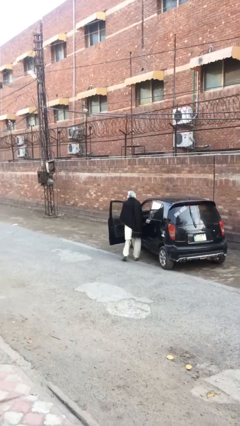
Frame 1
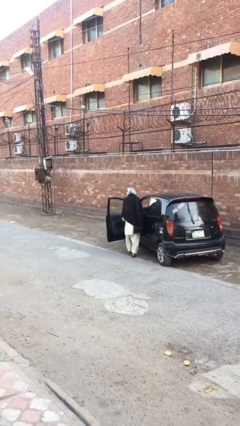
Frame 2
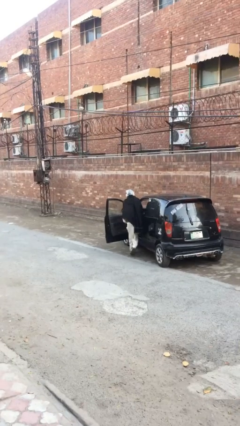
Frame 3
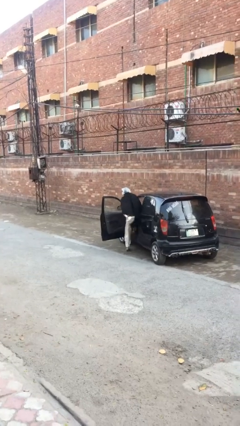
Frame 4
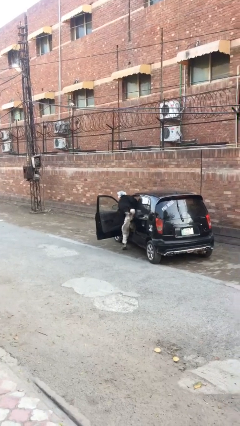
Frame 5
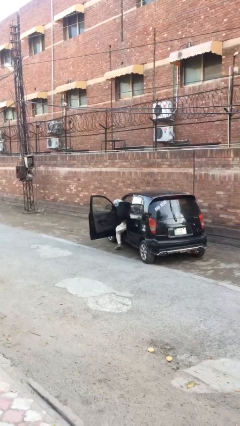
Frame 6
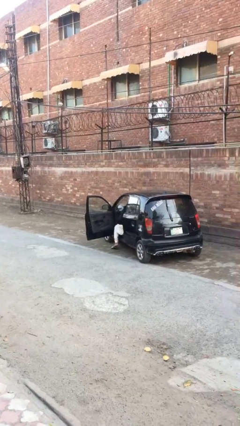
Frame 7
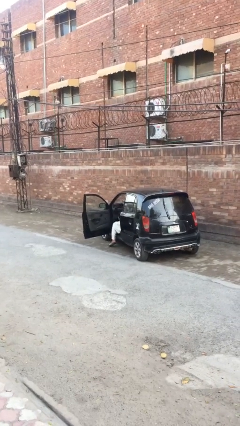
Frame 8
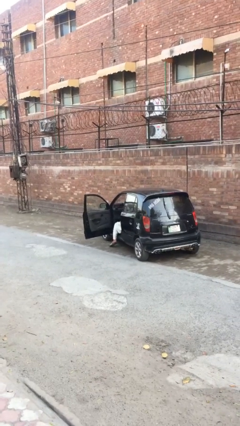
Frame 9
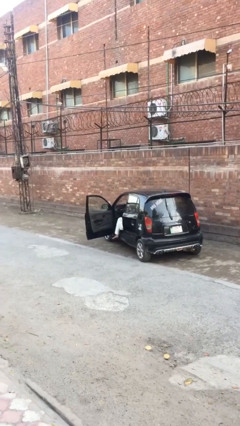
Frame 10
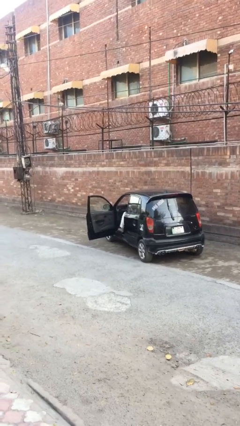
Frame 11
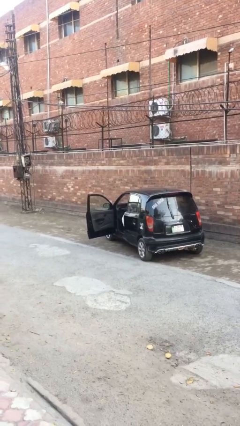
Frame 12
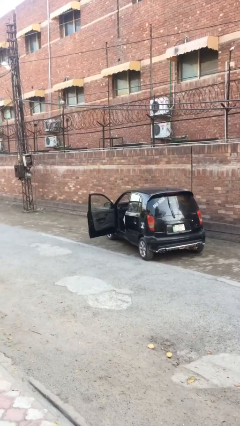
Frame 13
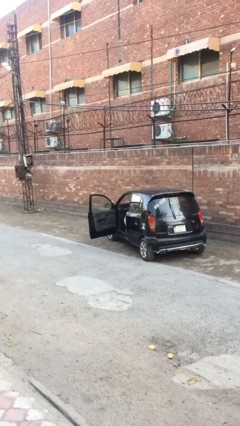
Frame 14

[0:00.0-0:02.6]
person enters car

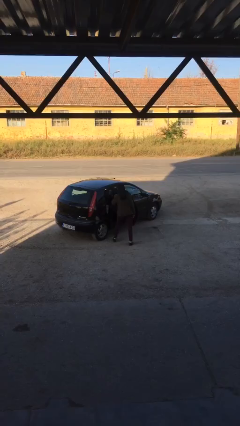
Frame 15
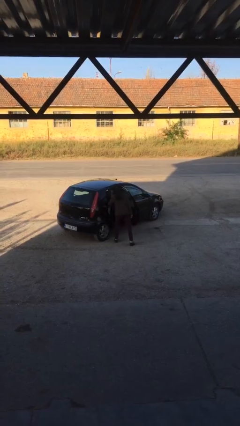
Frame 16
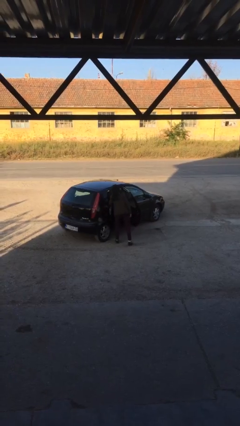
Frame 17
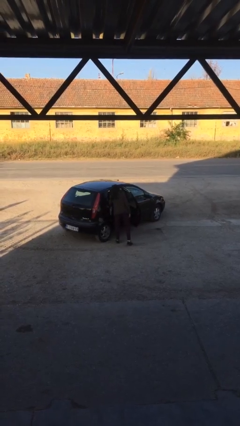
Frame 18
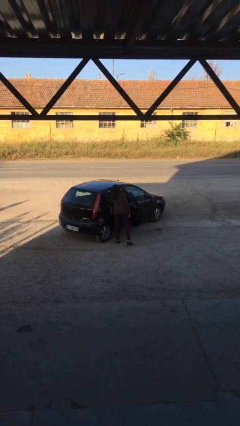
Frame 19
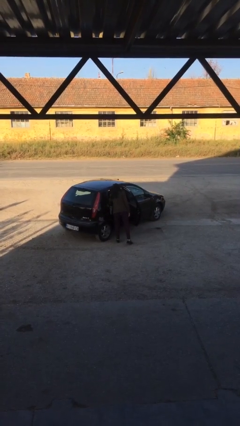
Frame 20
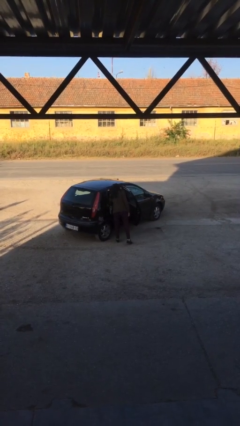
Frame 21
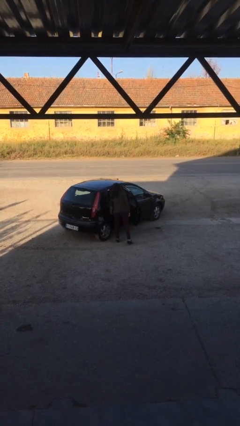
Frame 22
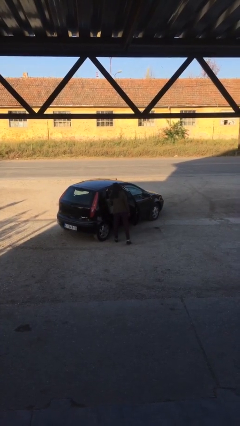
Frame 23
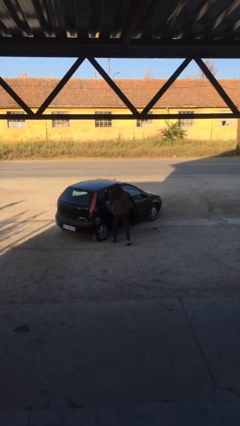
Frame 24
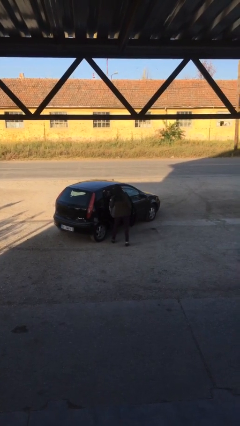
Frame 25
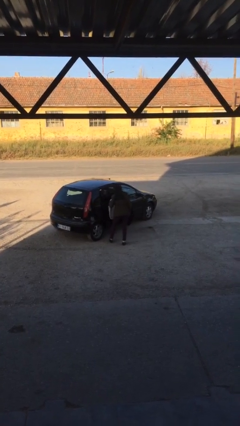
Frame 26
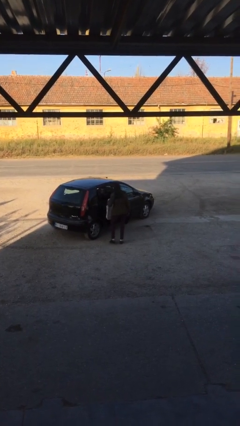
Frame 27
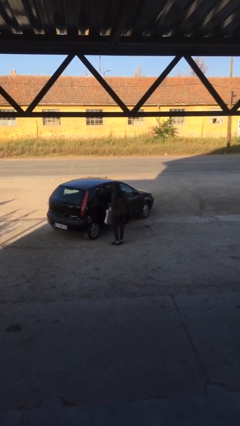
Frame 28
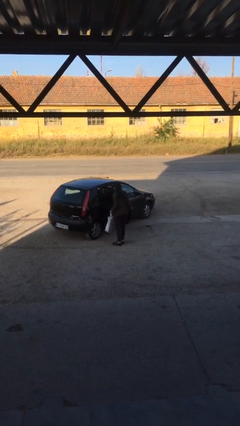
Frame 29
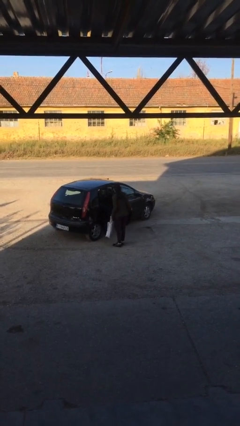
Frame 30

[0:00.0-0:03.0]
person unloads car

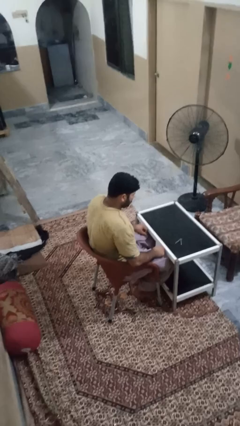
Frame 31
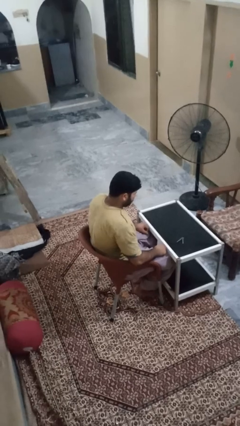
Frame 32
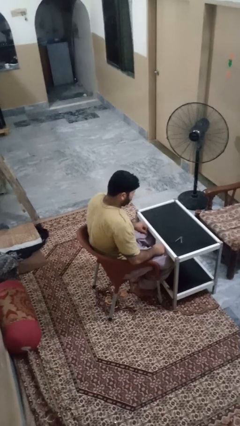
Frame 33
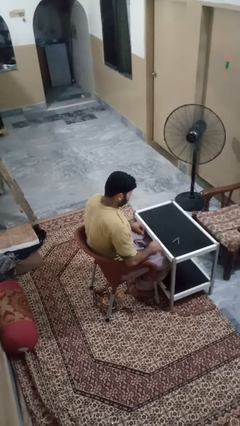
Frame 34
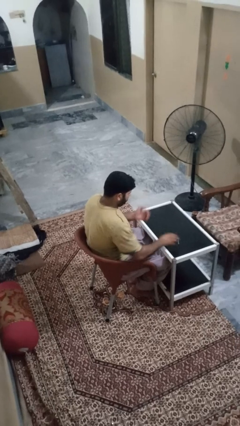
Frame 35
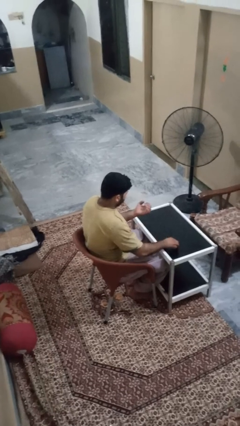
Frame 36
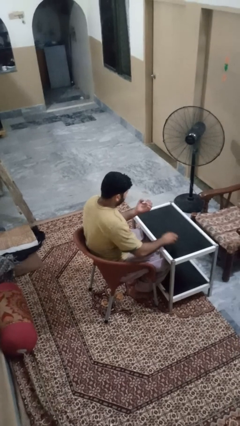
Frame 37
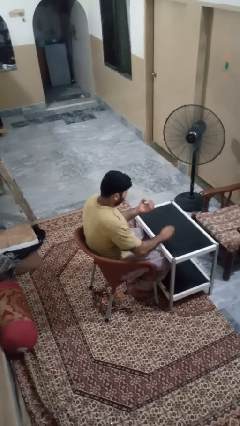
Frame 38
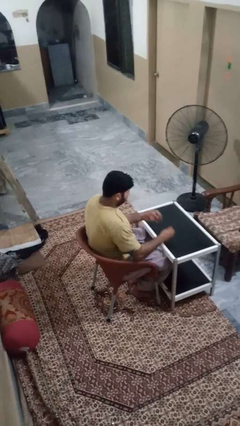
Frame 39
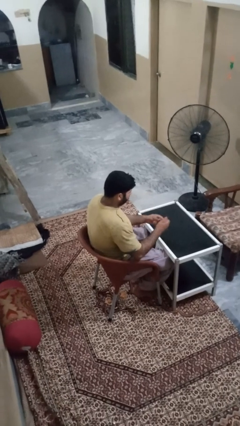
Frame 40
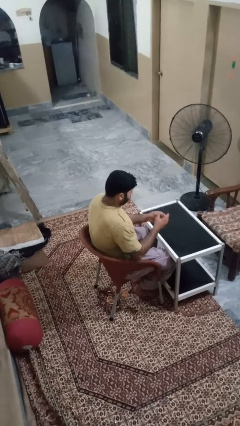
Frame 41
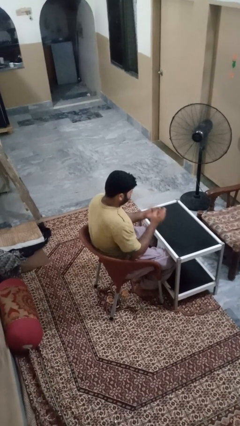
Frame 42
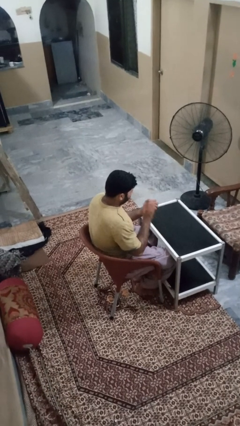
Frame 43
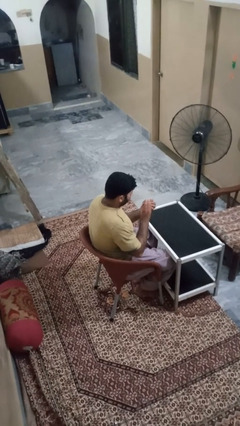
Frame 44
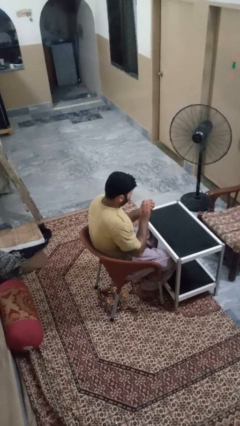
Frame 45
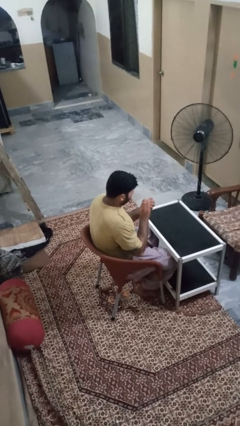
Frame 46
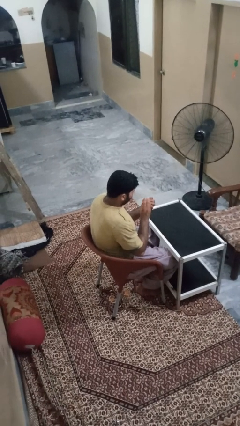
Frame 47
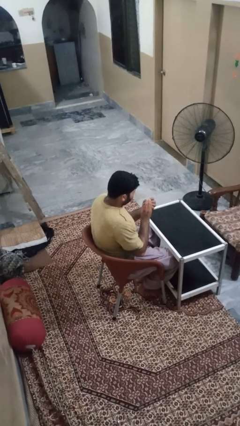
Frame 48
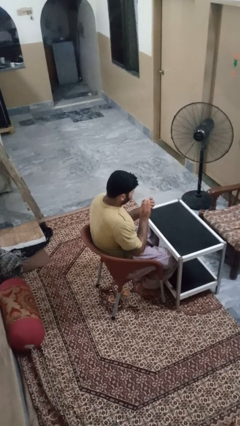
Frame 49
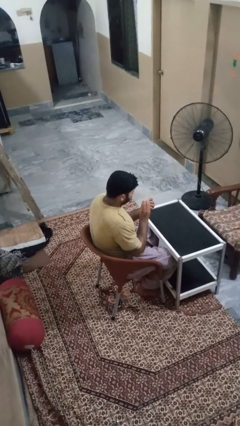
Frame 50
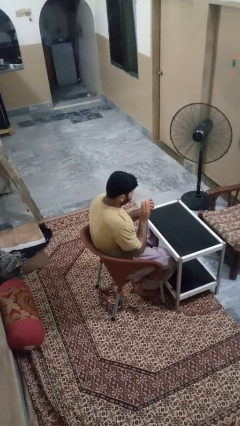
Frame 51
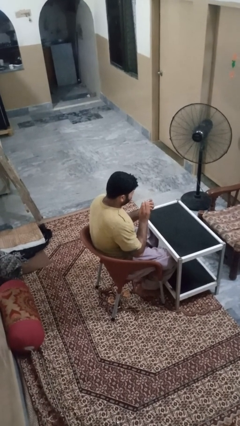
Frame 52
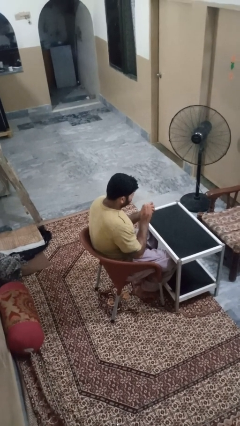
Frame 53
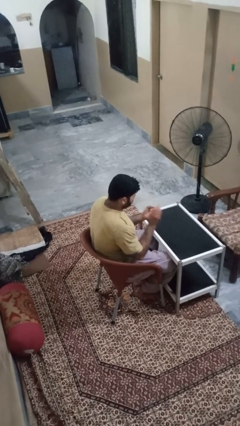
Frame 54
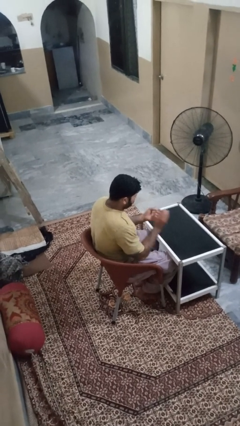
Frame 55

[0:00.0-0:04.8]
person clips fingernails

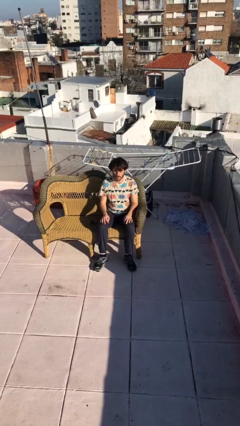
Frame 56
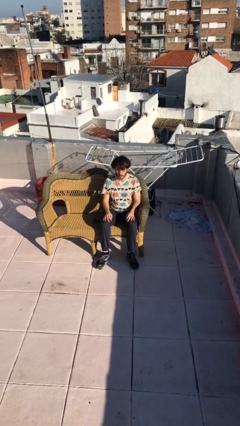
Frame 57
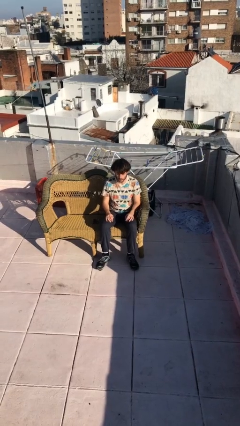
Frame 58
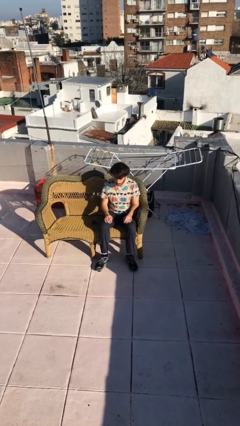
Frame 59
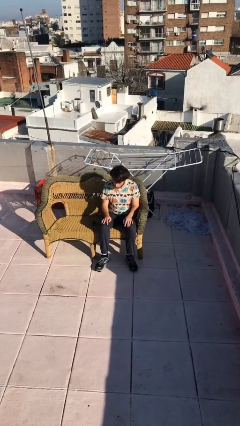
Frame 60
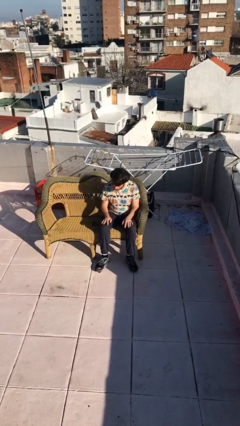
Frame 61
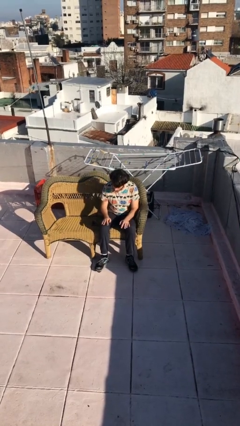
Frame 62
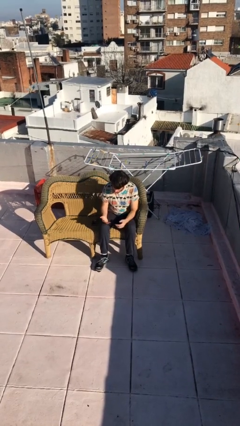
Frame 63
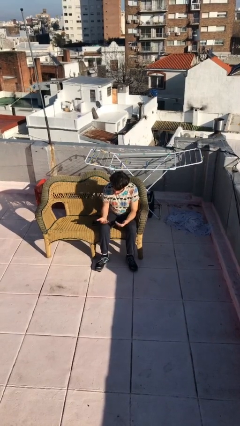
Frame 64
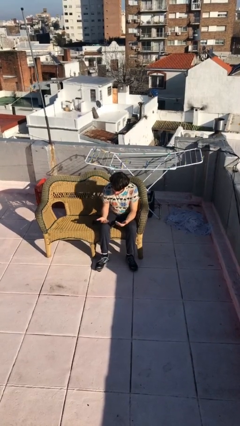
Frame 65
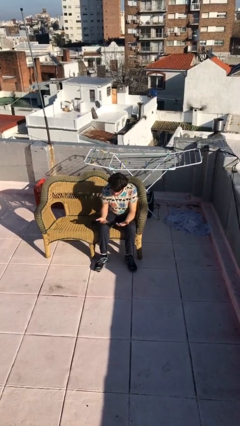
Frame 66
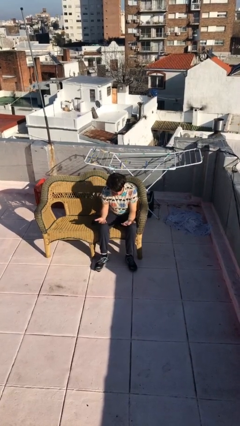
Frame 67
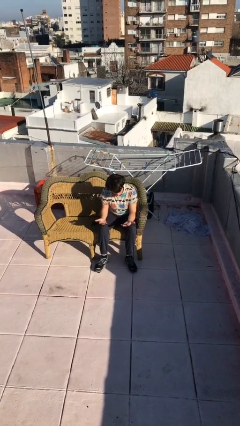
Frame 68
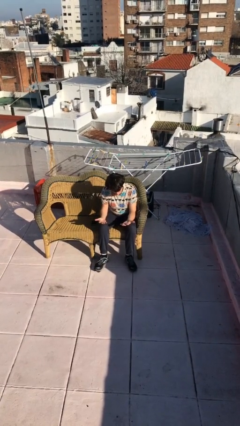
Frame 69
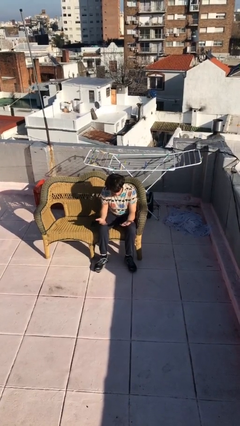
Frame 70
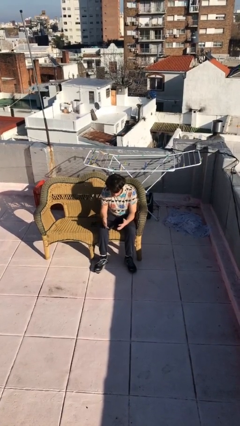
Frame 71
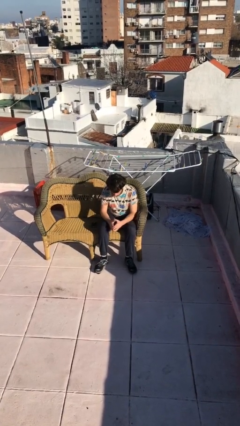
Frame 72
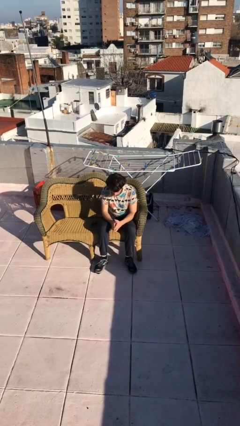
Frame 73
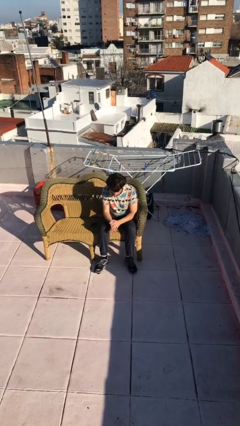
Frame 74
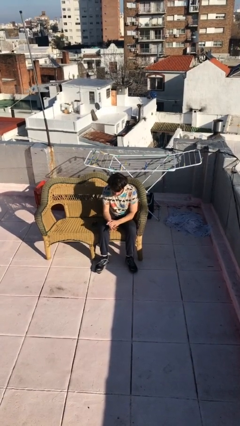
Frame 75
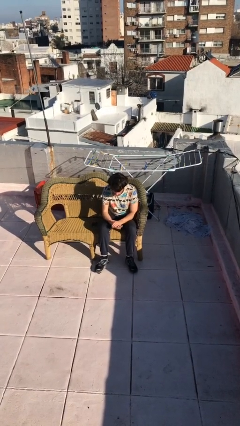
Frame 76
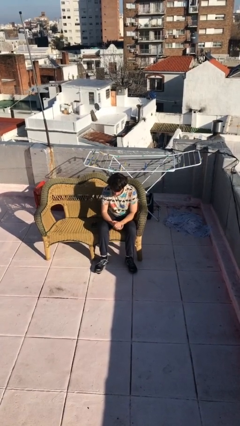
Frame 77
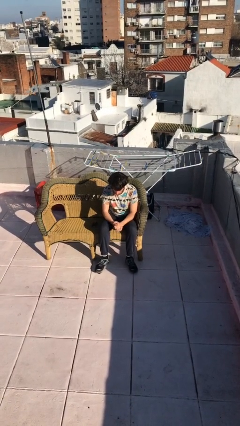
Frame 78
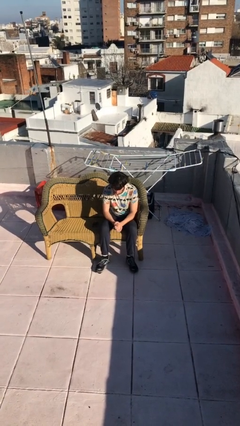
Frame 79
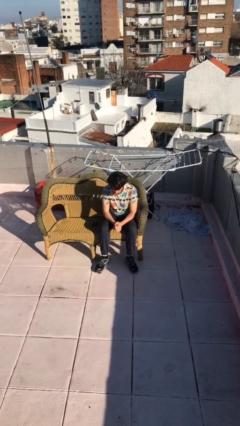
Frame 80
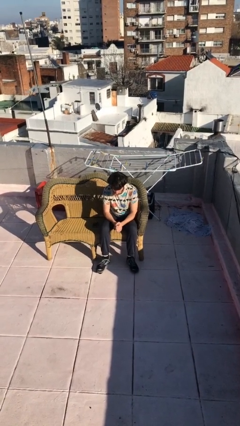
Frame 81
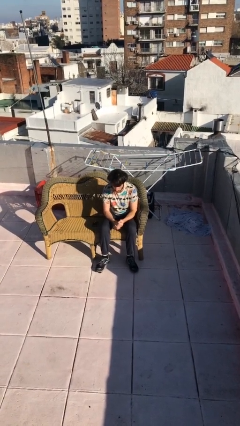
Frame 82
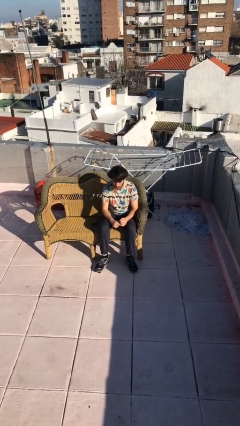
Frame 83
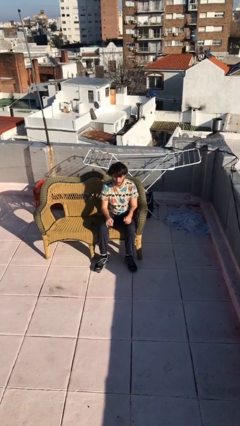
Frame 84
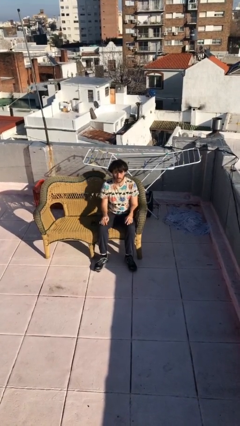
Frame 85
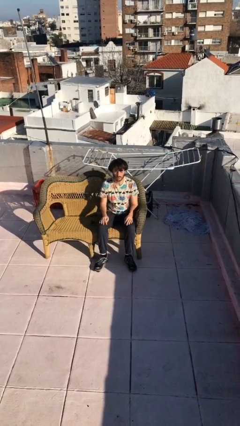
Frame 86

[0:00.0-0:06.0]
person looks at hands in lap

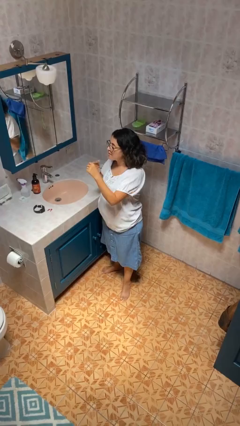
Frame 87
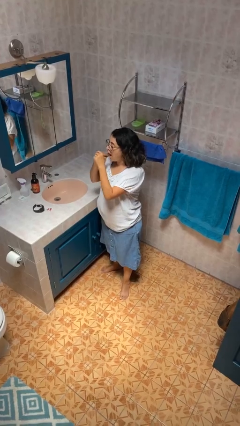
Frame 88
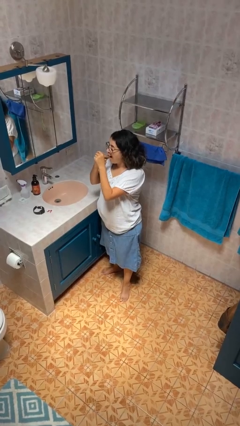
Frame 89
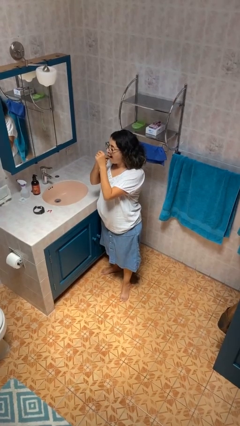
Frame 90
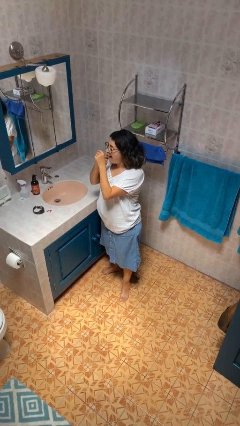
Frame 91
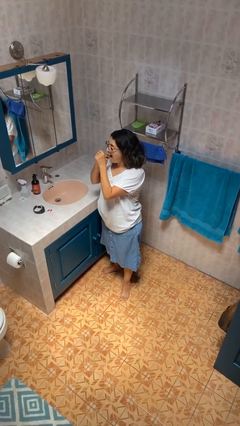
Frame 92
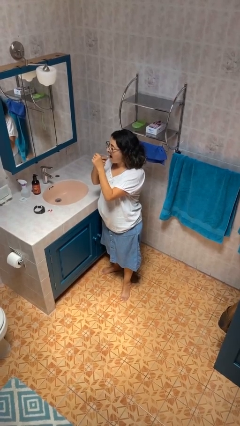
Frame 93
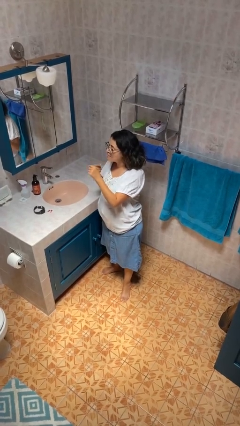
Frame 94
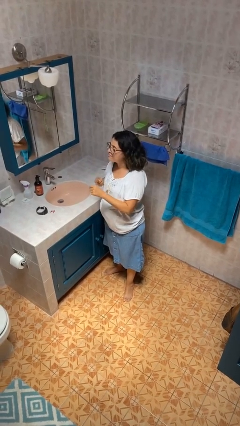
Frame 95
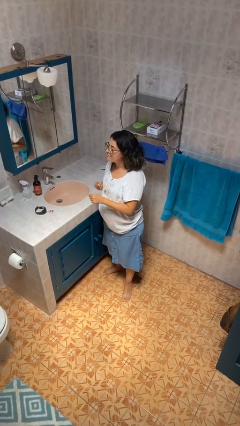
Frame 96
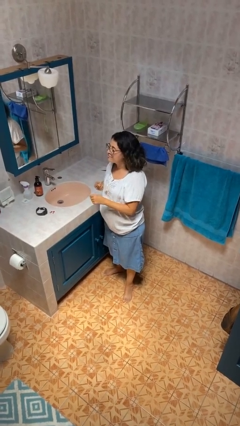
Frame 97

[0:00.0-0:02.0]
person flosses
